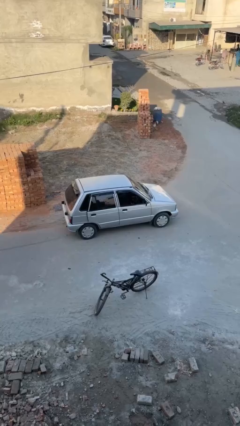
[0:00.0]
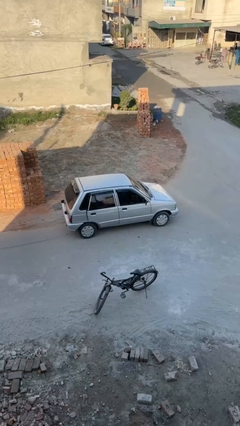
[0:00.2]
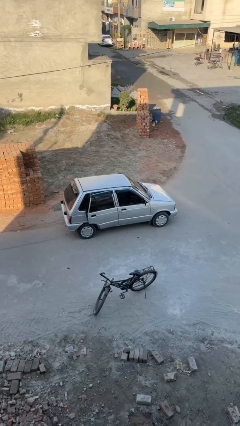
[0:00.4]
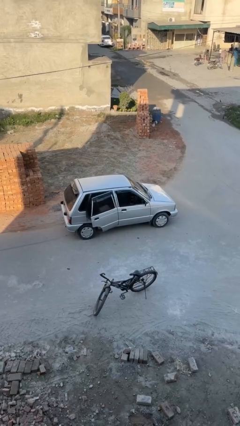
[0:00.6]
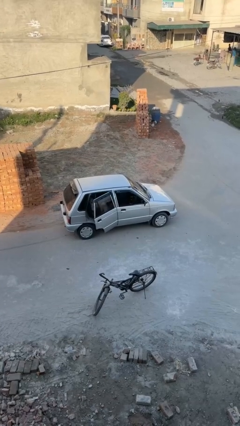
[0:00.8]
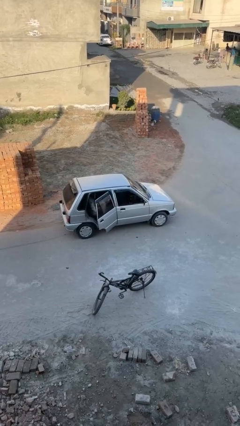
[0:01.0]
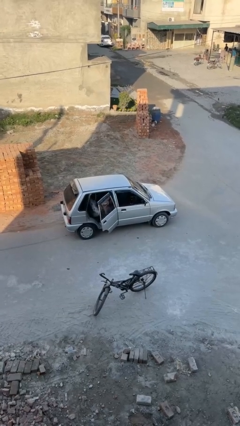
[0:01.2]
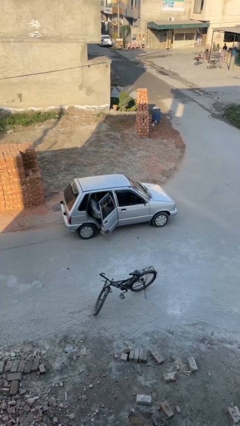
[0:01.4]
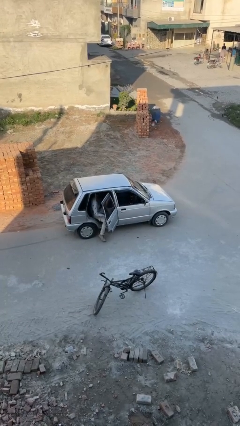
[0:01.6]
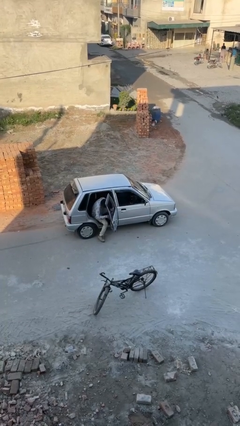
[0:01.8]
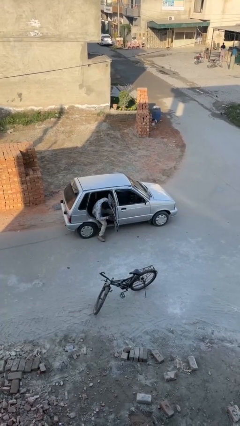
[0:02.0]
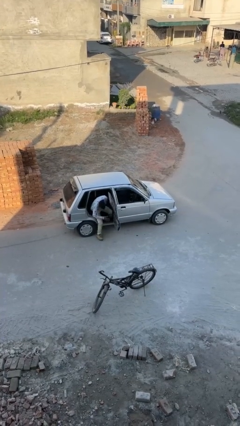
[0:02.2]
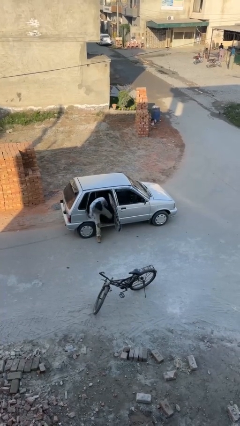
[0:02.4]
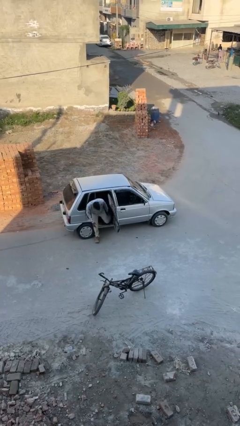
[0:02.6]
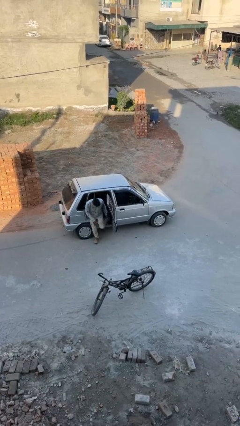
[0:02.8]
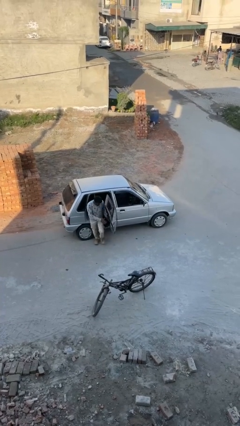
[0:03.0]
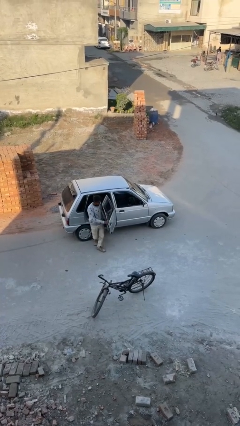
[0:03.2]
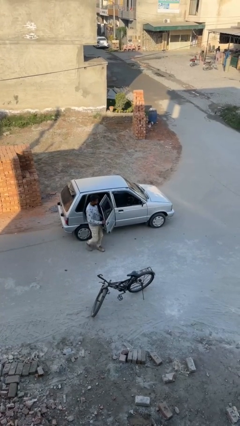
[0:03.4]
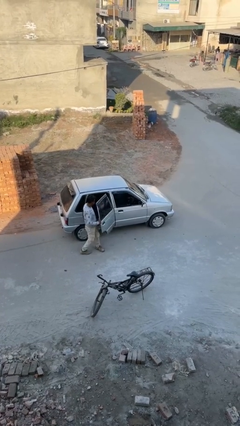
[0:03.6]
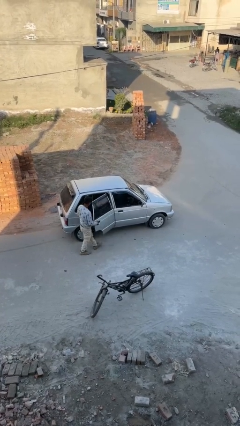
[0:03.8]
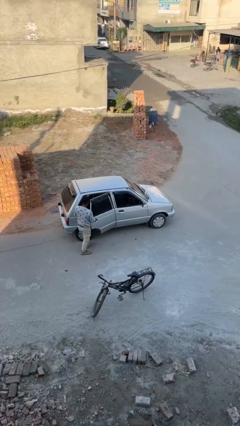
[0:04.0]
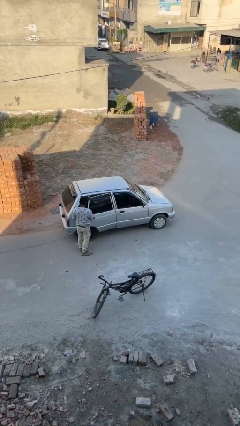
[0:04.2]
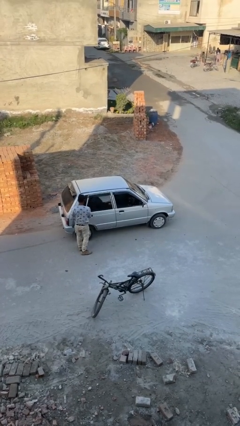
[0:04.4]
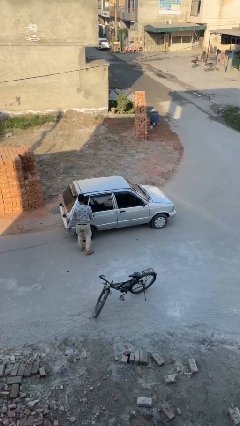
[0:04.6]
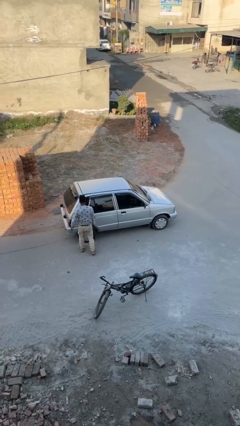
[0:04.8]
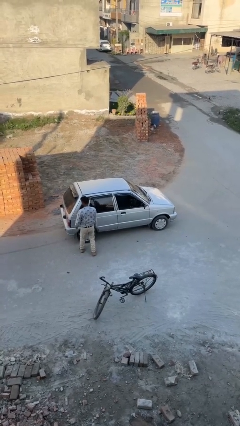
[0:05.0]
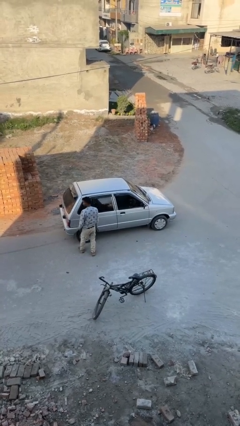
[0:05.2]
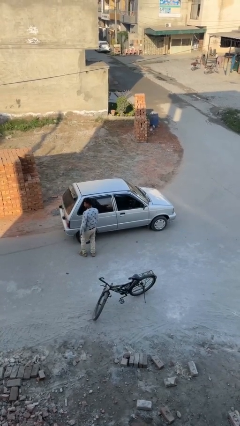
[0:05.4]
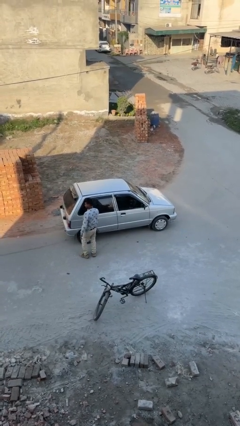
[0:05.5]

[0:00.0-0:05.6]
car drops off person

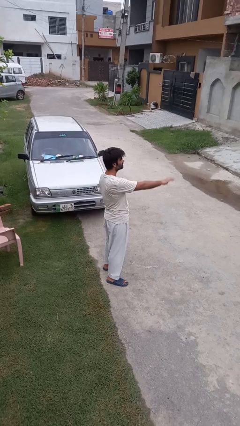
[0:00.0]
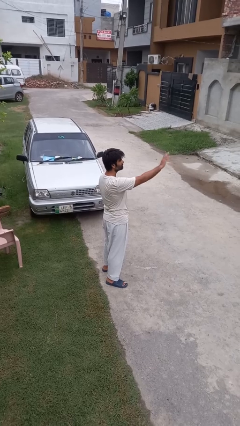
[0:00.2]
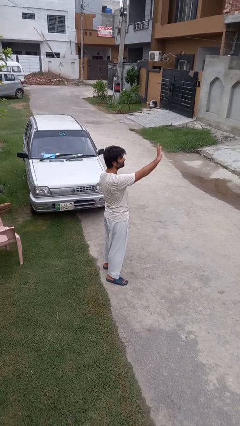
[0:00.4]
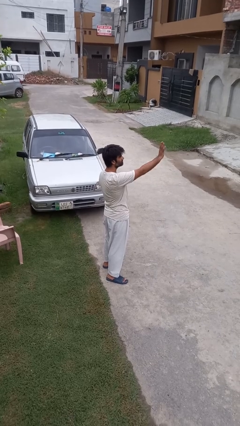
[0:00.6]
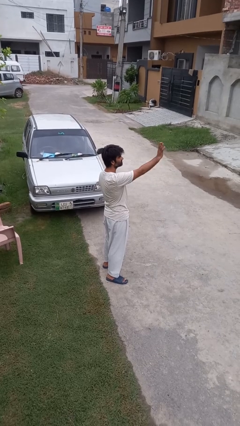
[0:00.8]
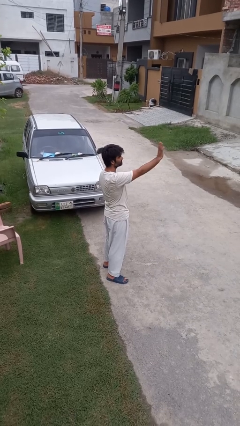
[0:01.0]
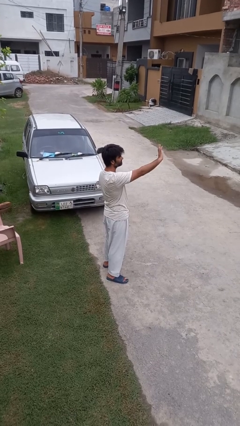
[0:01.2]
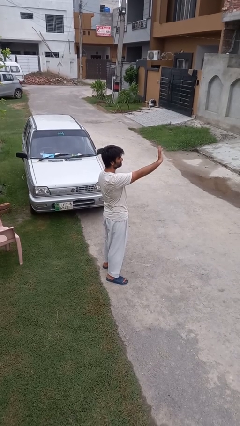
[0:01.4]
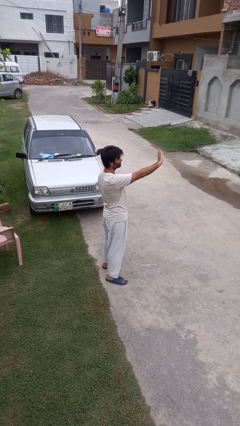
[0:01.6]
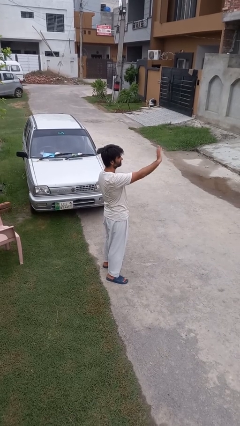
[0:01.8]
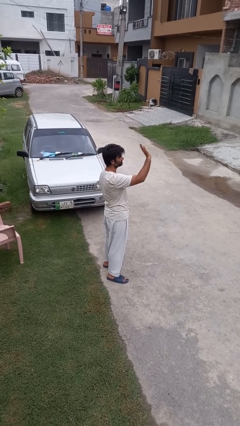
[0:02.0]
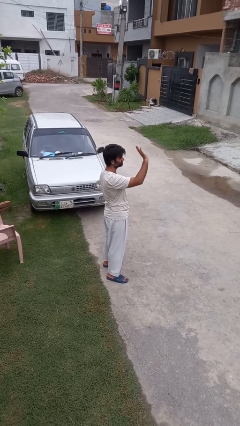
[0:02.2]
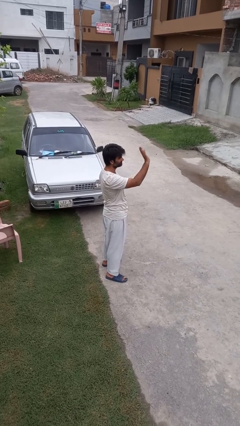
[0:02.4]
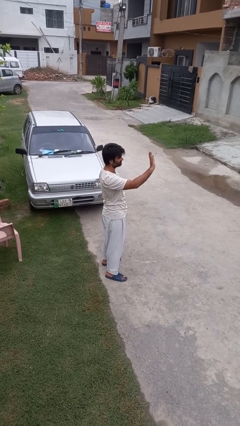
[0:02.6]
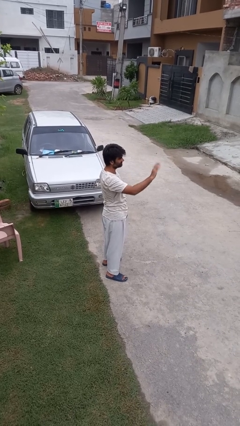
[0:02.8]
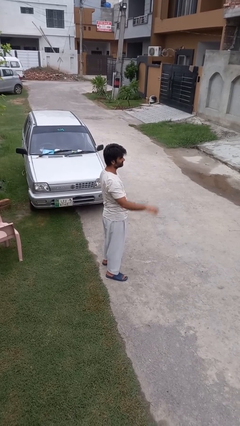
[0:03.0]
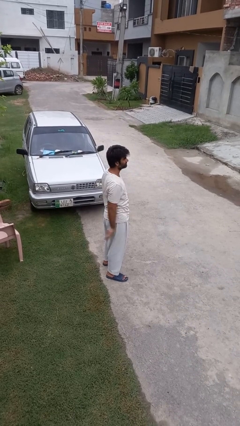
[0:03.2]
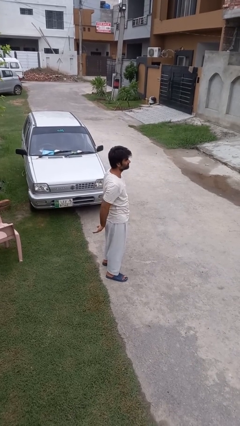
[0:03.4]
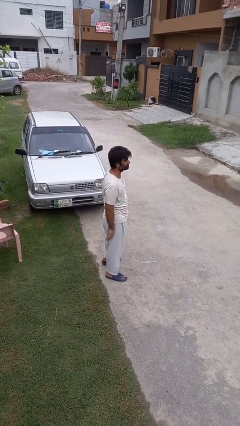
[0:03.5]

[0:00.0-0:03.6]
person waves at person

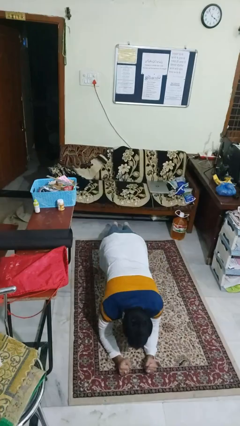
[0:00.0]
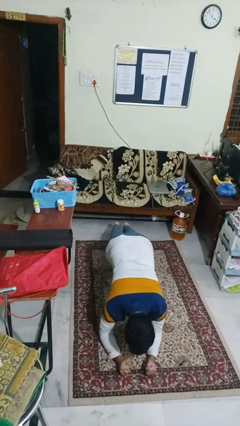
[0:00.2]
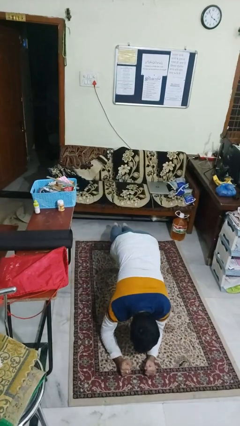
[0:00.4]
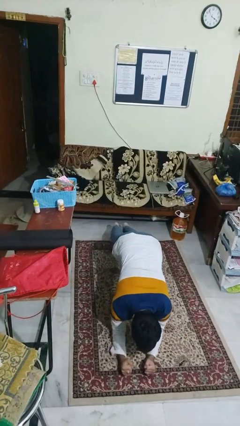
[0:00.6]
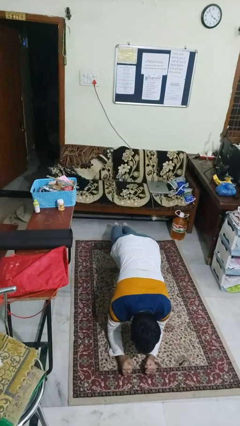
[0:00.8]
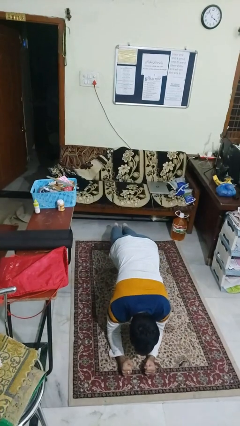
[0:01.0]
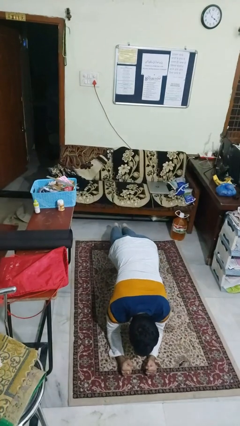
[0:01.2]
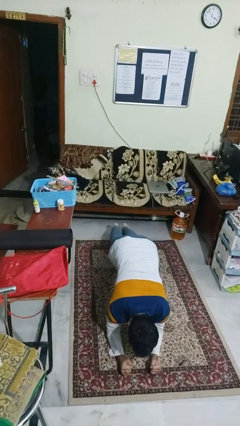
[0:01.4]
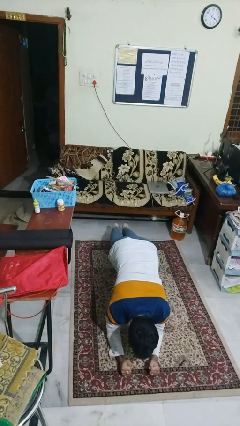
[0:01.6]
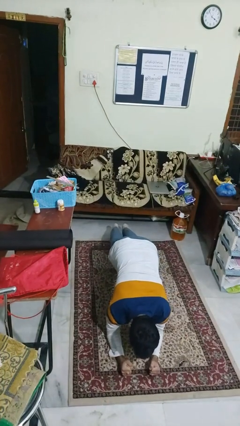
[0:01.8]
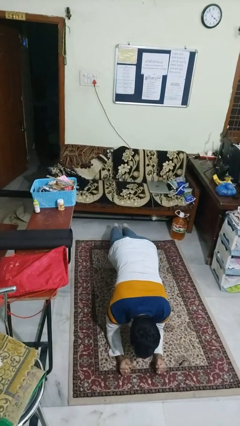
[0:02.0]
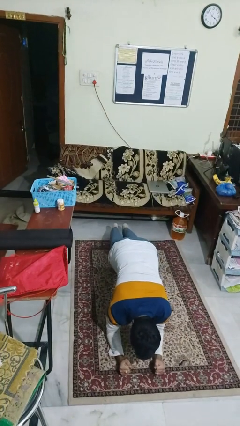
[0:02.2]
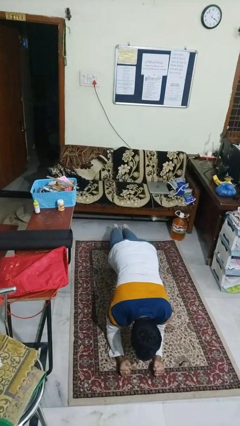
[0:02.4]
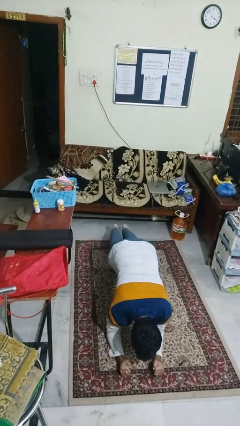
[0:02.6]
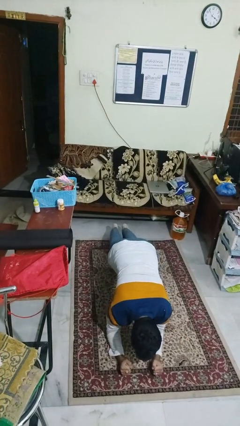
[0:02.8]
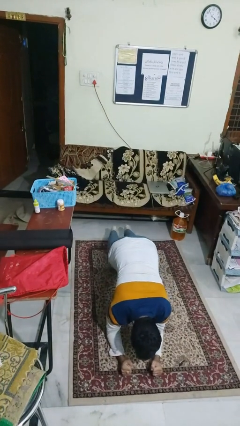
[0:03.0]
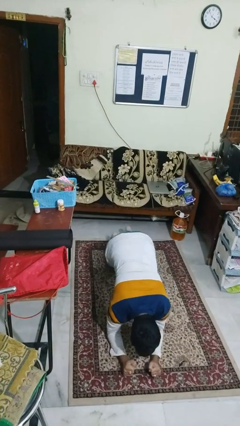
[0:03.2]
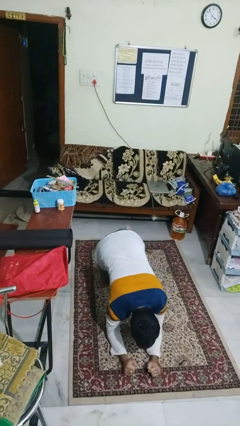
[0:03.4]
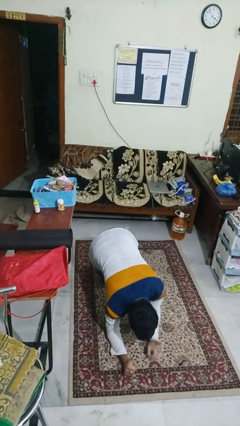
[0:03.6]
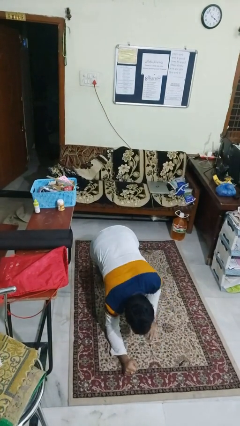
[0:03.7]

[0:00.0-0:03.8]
person exercises with plank

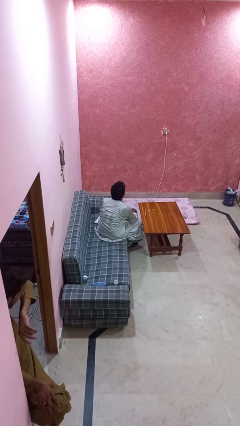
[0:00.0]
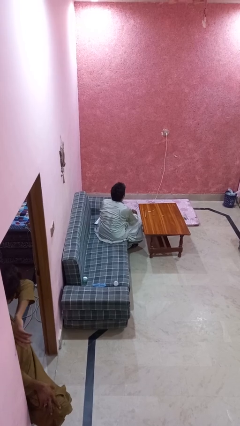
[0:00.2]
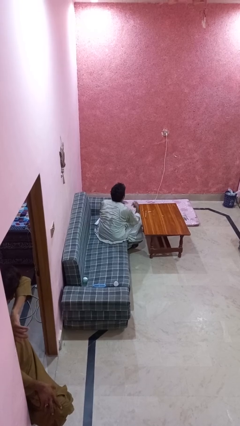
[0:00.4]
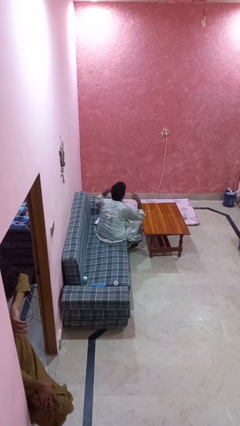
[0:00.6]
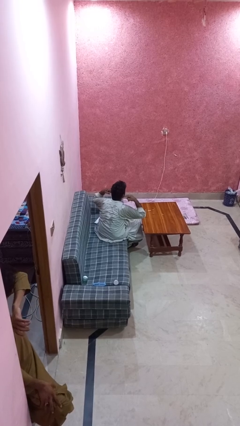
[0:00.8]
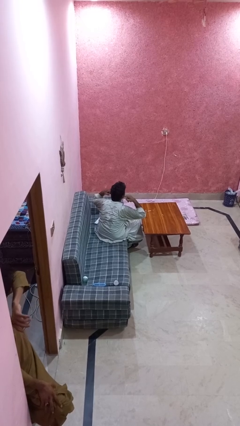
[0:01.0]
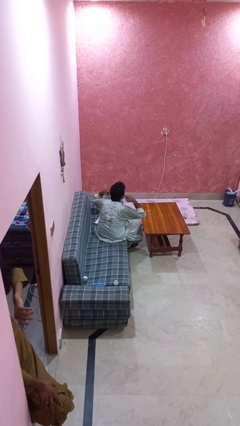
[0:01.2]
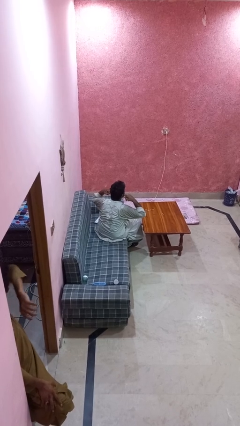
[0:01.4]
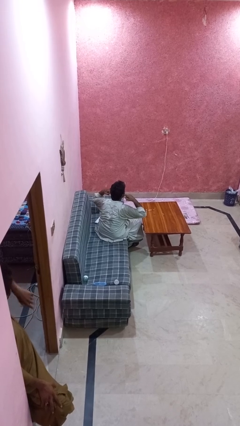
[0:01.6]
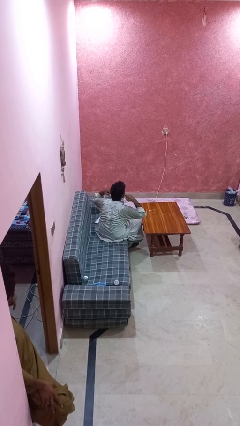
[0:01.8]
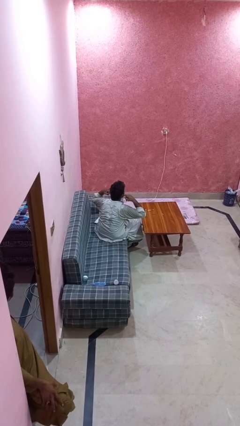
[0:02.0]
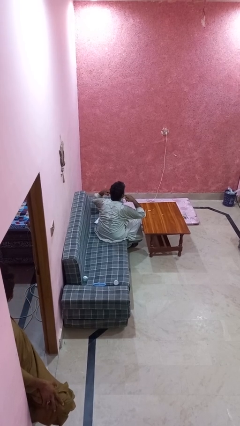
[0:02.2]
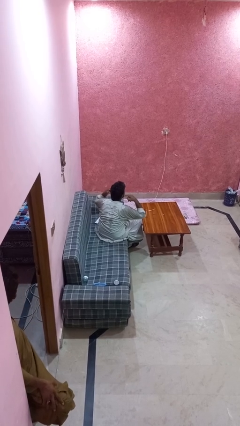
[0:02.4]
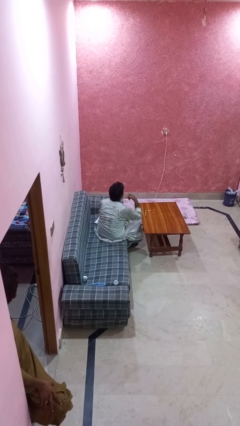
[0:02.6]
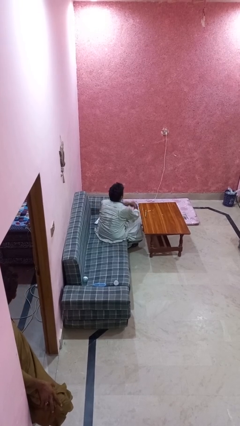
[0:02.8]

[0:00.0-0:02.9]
person puts fingers in ear

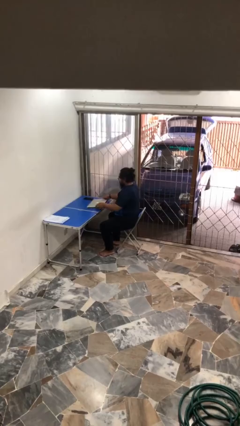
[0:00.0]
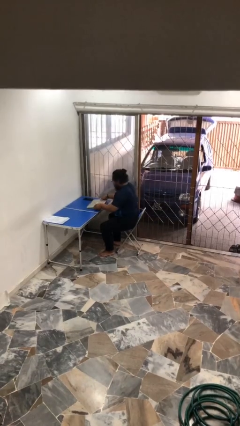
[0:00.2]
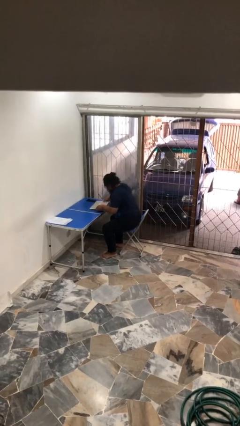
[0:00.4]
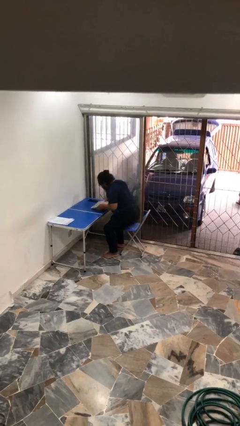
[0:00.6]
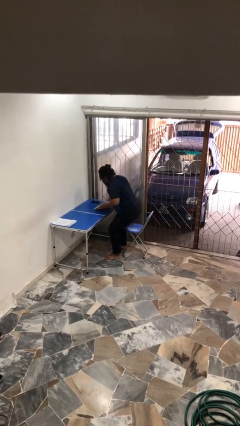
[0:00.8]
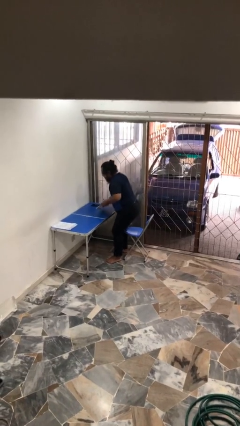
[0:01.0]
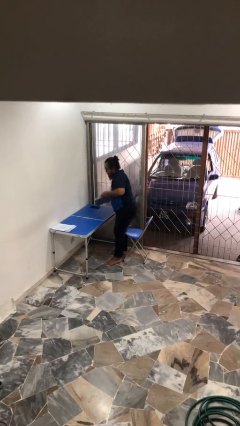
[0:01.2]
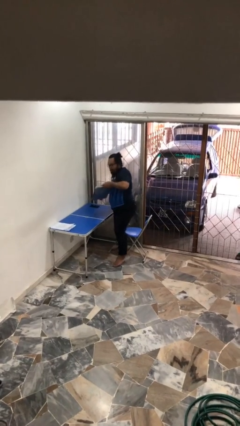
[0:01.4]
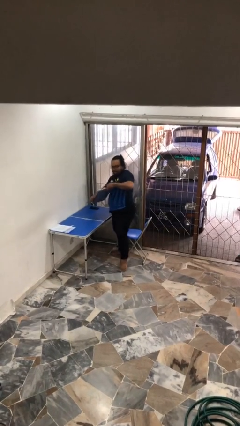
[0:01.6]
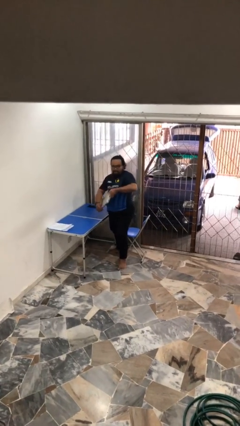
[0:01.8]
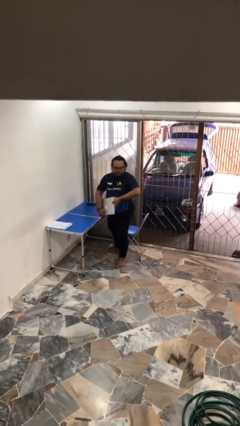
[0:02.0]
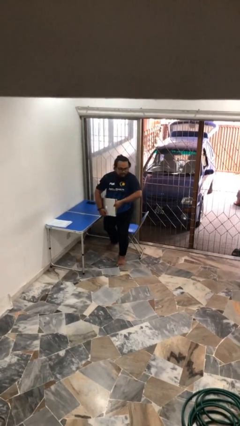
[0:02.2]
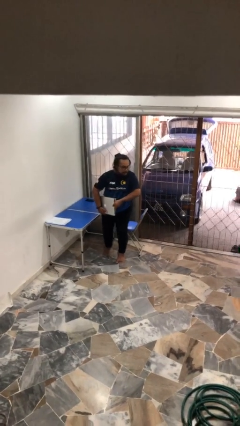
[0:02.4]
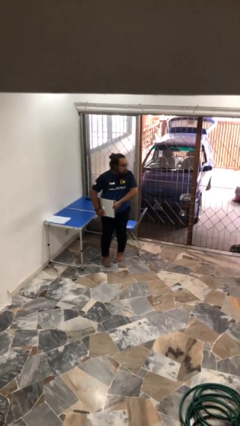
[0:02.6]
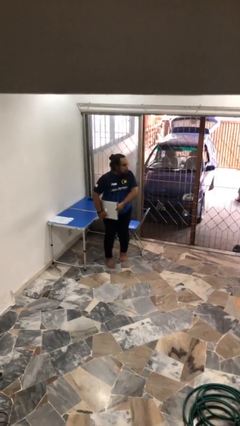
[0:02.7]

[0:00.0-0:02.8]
person stands up
